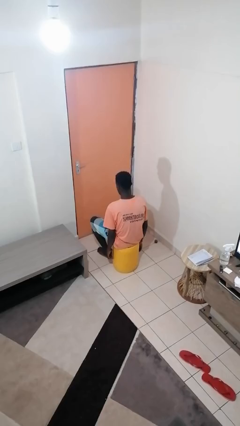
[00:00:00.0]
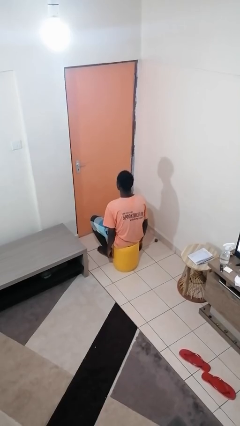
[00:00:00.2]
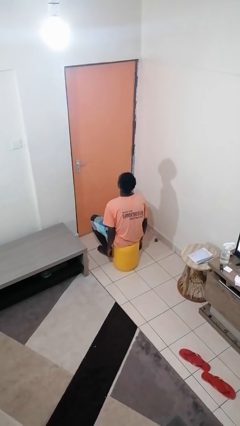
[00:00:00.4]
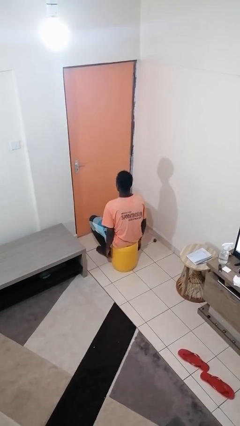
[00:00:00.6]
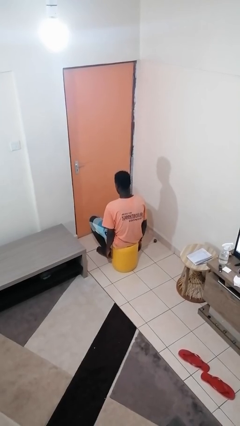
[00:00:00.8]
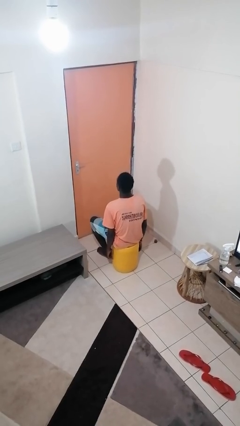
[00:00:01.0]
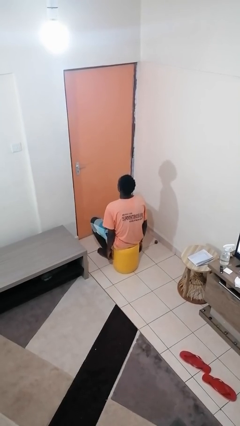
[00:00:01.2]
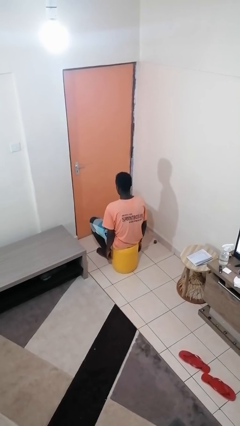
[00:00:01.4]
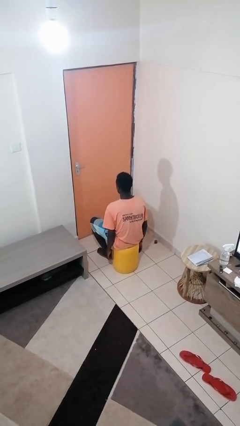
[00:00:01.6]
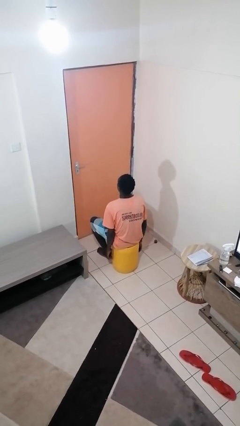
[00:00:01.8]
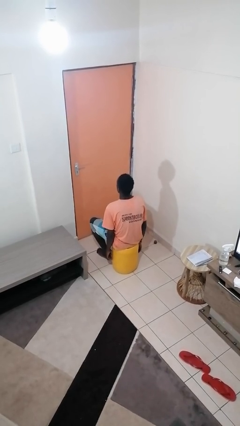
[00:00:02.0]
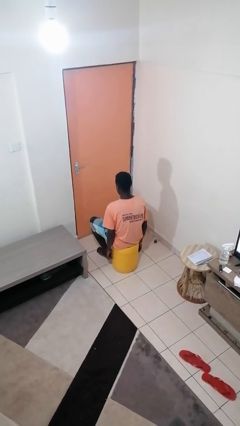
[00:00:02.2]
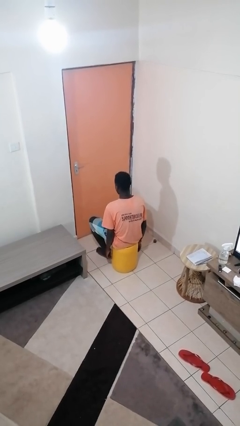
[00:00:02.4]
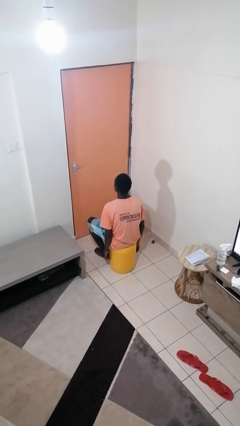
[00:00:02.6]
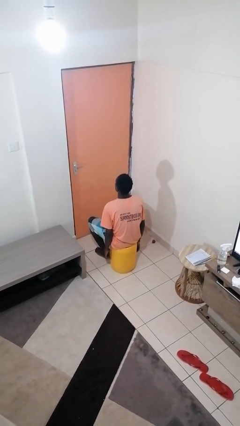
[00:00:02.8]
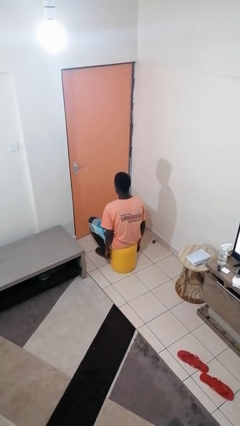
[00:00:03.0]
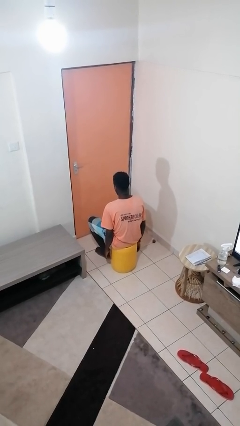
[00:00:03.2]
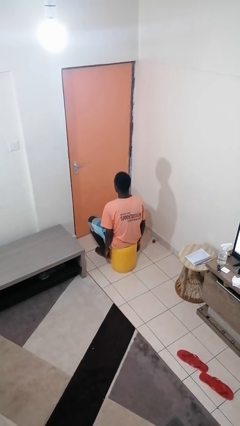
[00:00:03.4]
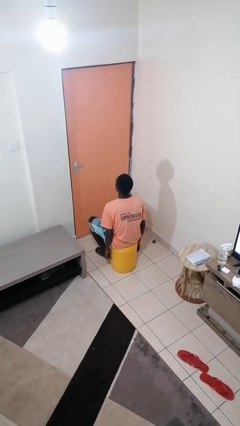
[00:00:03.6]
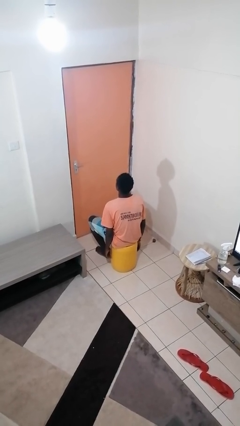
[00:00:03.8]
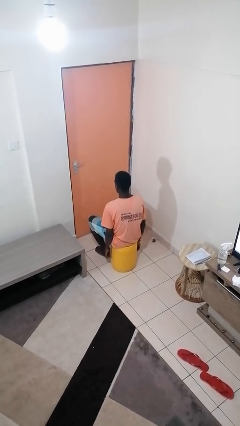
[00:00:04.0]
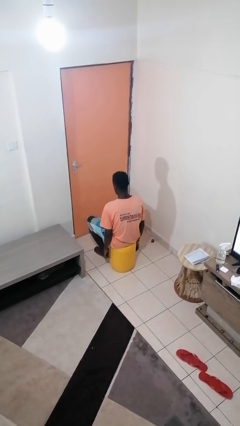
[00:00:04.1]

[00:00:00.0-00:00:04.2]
person nods head

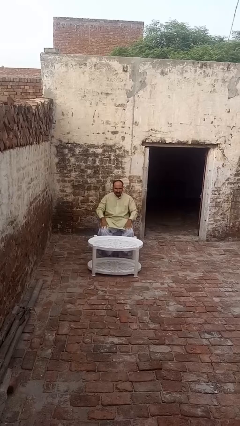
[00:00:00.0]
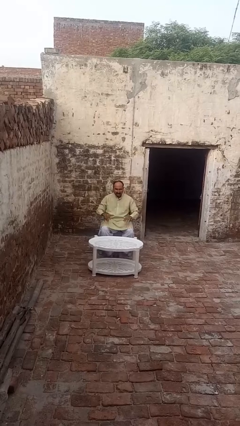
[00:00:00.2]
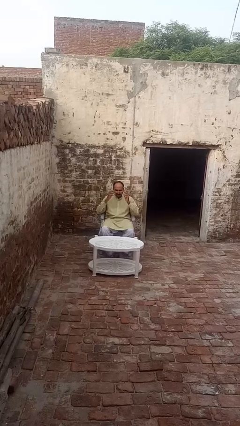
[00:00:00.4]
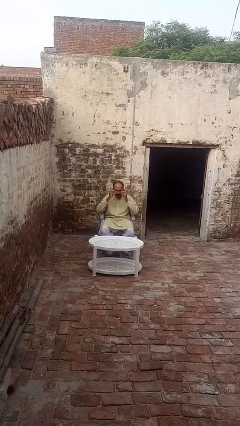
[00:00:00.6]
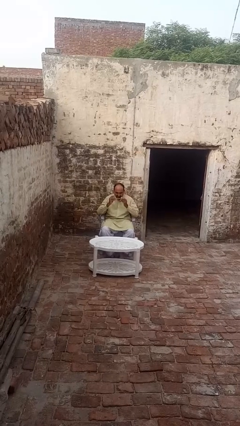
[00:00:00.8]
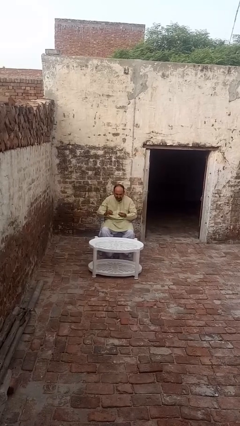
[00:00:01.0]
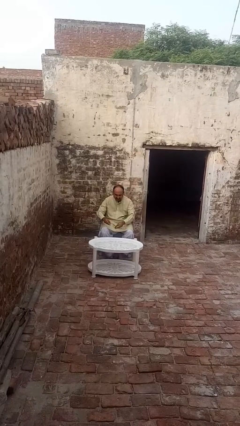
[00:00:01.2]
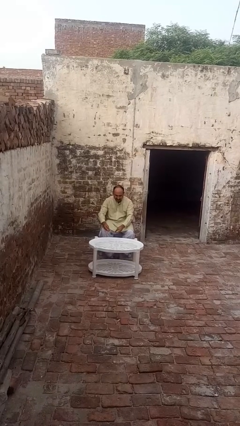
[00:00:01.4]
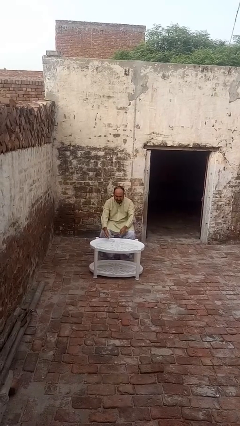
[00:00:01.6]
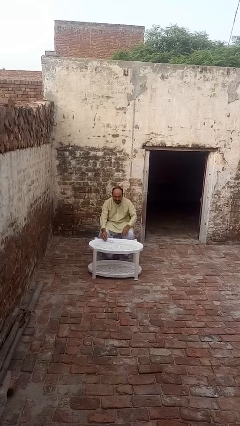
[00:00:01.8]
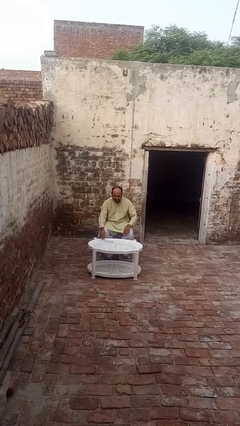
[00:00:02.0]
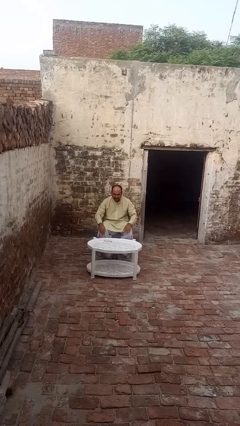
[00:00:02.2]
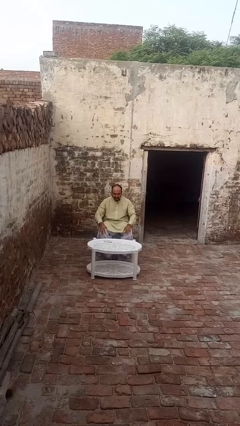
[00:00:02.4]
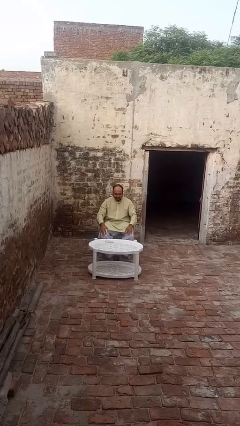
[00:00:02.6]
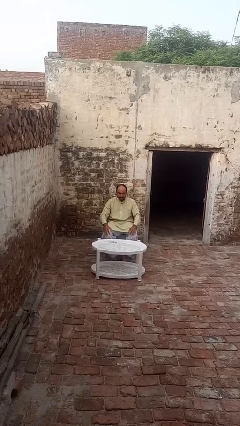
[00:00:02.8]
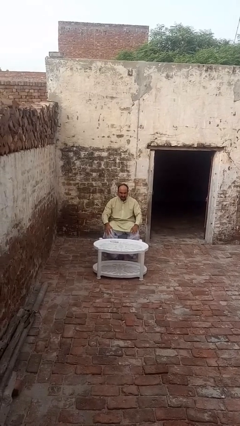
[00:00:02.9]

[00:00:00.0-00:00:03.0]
person takes off glasses

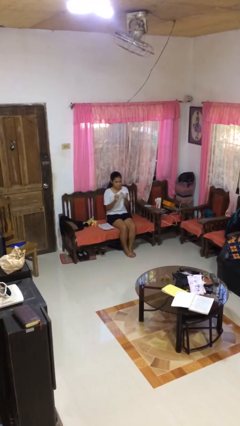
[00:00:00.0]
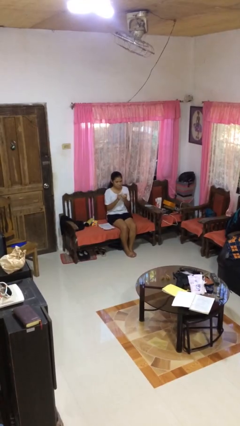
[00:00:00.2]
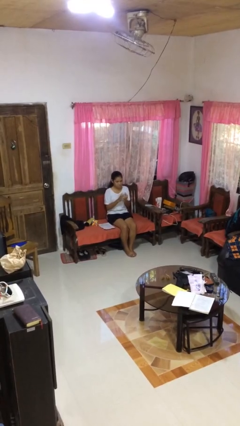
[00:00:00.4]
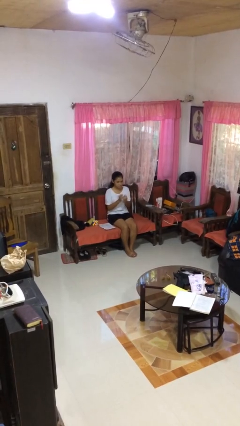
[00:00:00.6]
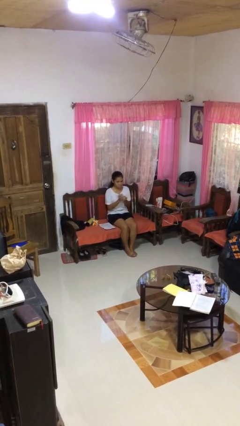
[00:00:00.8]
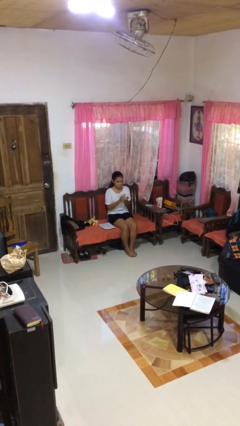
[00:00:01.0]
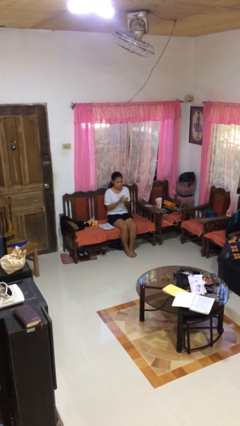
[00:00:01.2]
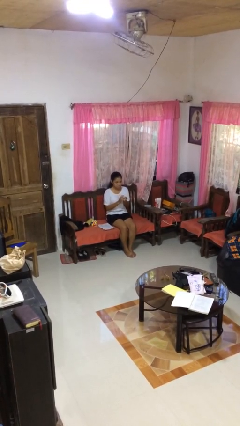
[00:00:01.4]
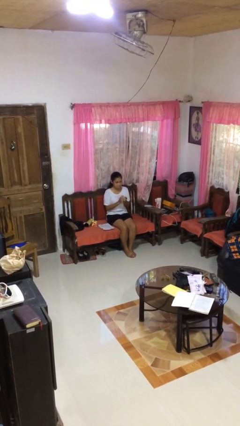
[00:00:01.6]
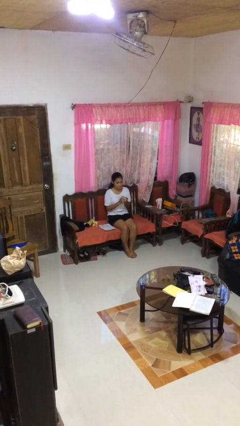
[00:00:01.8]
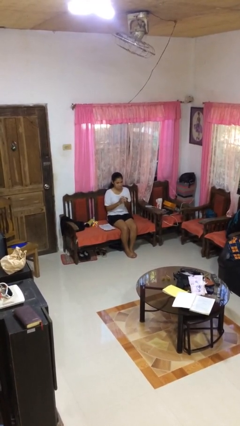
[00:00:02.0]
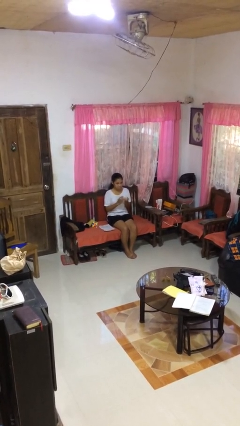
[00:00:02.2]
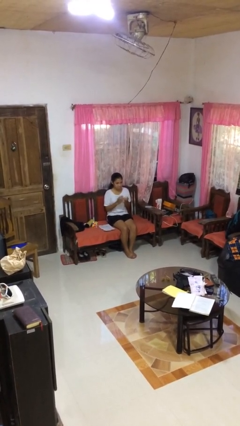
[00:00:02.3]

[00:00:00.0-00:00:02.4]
person crumples paper

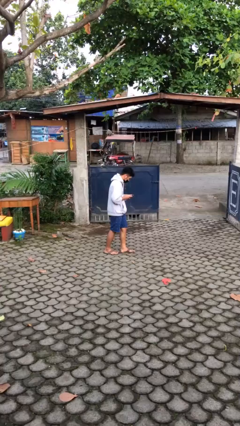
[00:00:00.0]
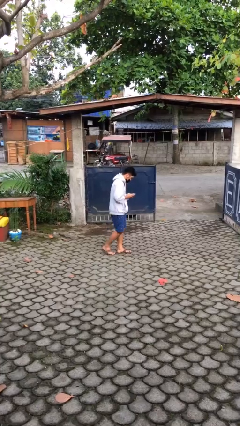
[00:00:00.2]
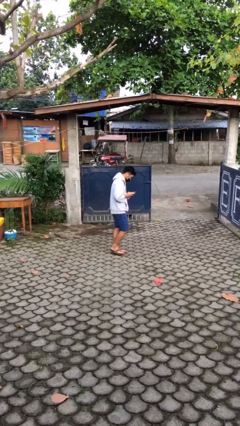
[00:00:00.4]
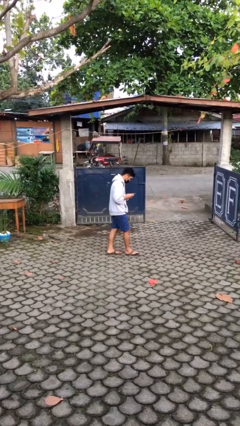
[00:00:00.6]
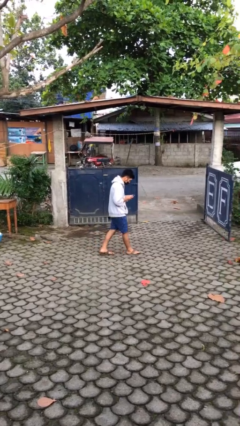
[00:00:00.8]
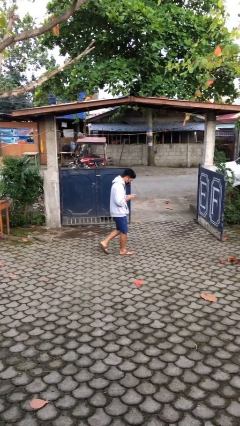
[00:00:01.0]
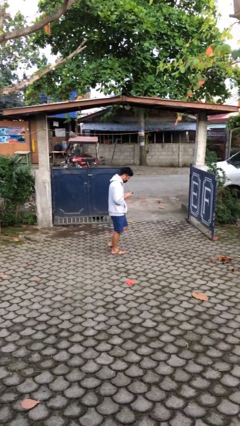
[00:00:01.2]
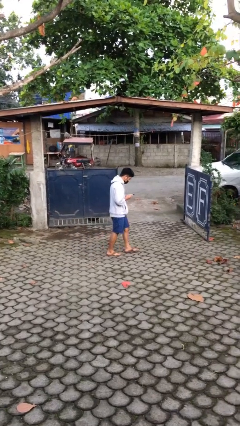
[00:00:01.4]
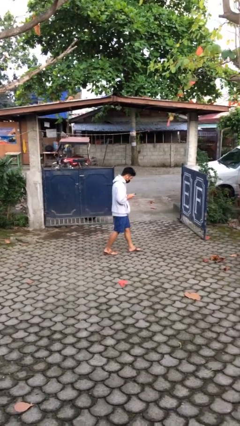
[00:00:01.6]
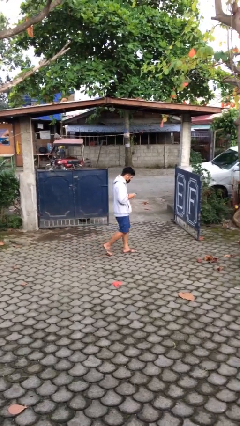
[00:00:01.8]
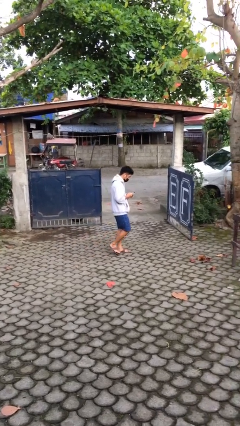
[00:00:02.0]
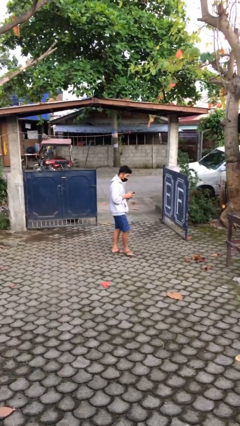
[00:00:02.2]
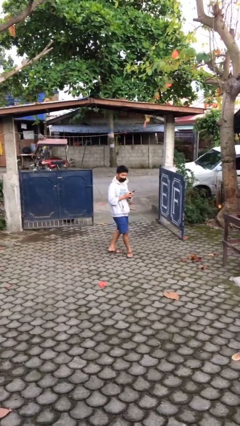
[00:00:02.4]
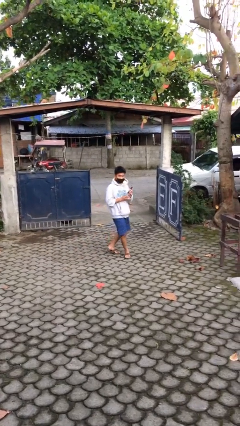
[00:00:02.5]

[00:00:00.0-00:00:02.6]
person texts on phone

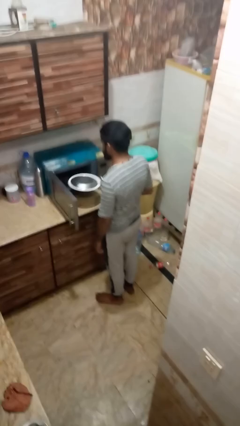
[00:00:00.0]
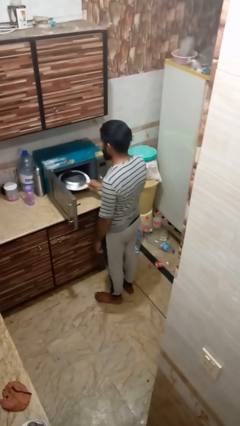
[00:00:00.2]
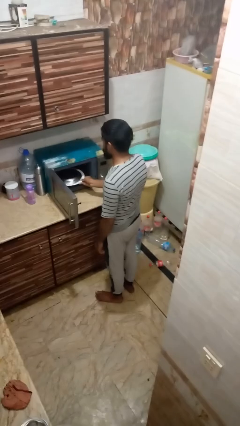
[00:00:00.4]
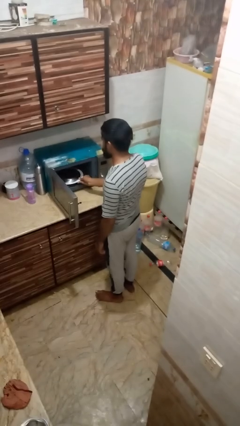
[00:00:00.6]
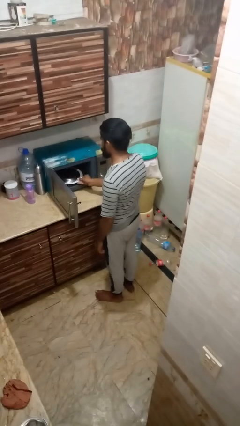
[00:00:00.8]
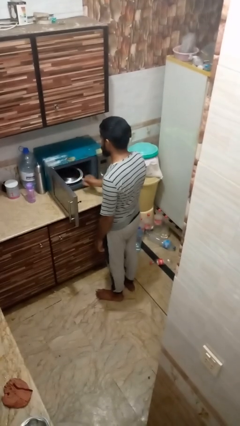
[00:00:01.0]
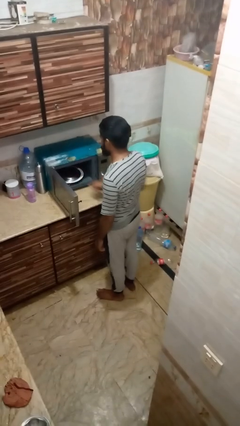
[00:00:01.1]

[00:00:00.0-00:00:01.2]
person puts object into oven

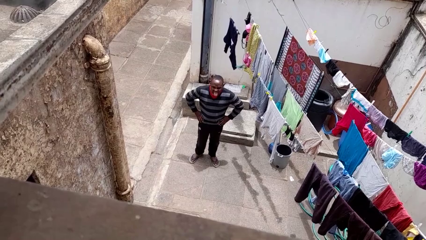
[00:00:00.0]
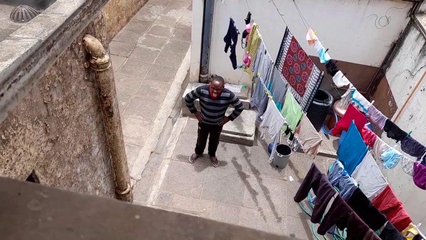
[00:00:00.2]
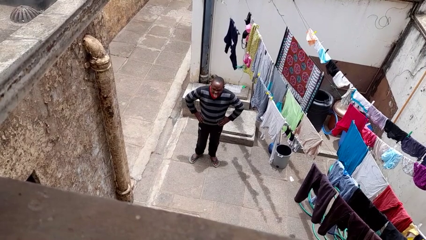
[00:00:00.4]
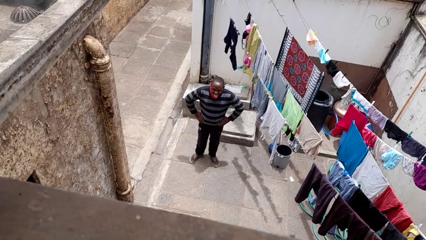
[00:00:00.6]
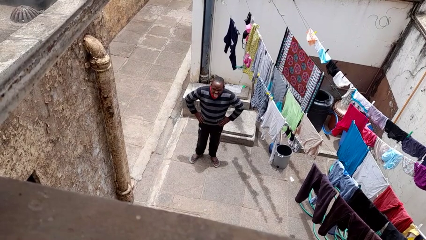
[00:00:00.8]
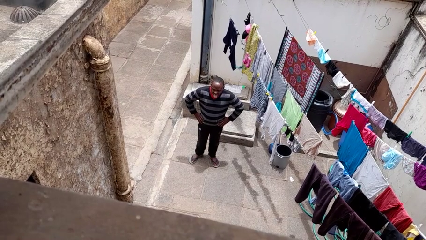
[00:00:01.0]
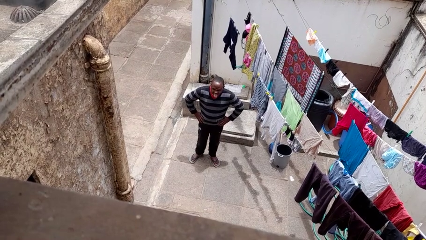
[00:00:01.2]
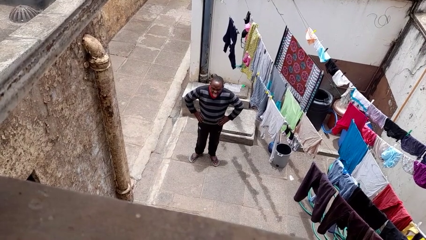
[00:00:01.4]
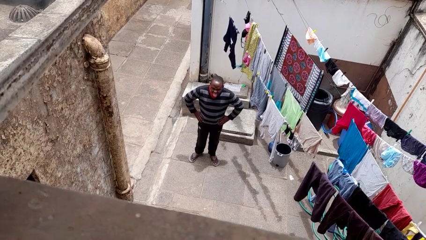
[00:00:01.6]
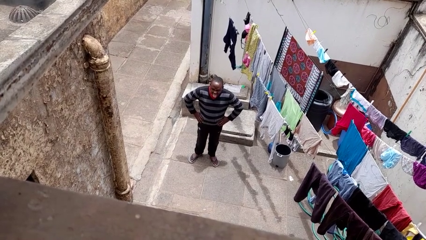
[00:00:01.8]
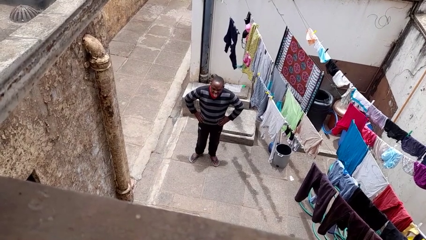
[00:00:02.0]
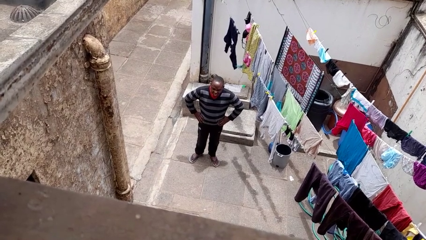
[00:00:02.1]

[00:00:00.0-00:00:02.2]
person sticks out tongue

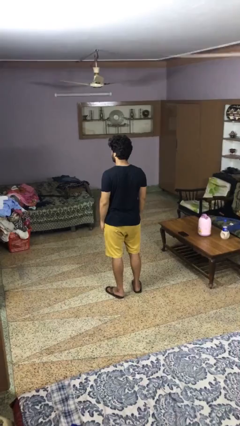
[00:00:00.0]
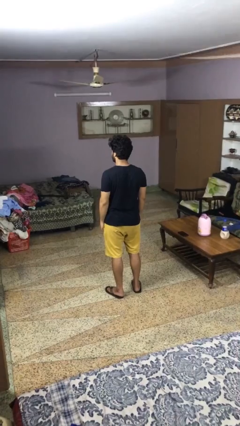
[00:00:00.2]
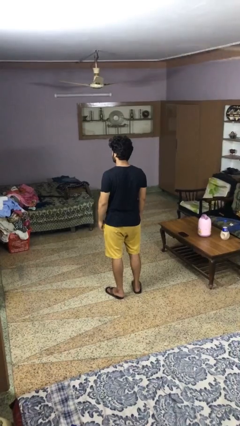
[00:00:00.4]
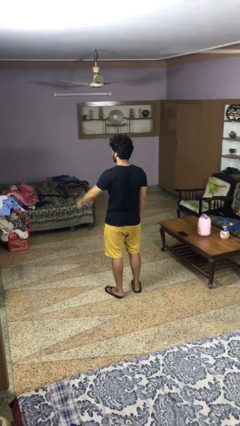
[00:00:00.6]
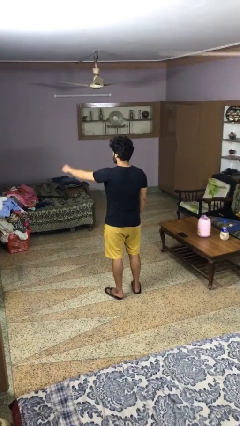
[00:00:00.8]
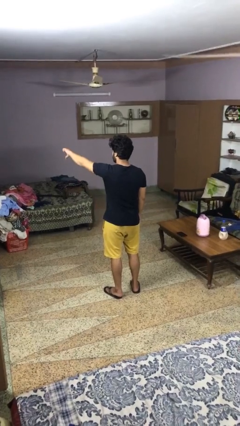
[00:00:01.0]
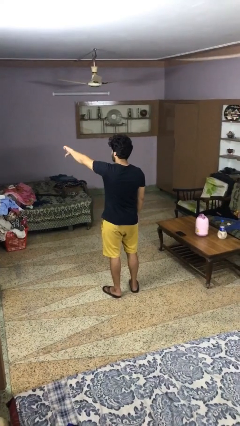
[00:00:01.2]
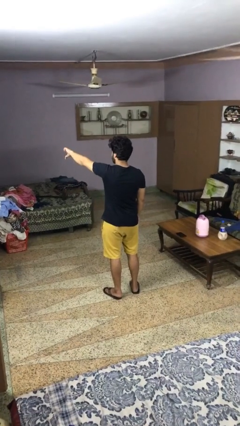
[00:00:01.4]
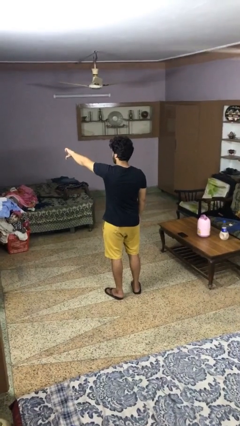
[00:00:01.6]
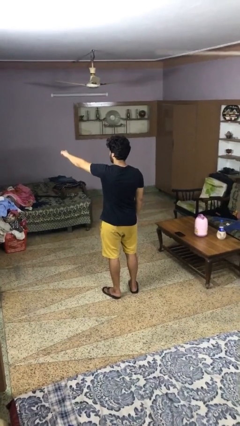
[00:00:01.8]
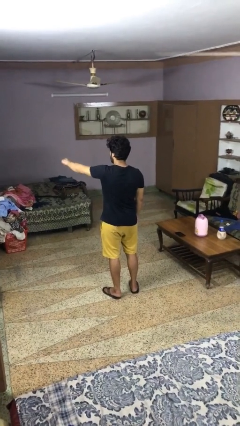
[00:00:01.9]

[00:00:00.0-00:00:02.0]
person gestures thumbs down
